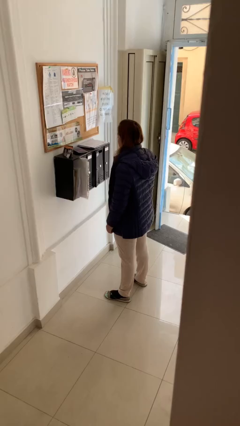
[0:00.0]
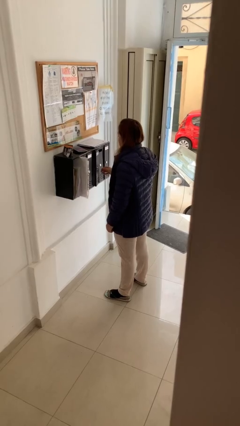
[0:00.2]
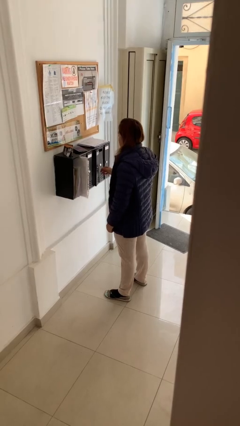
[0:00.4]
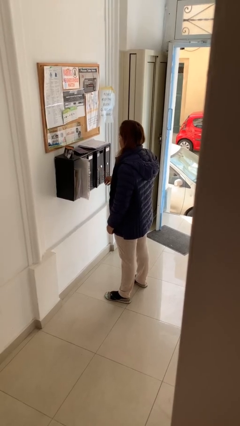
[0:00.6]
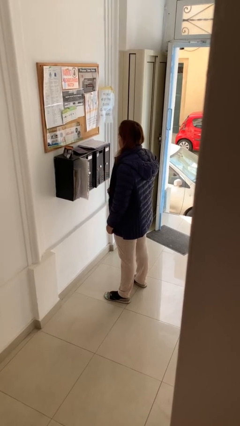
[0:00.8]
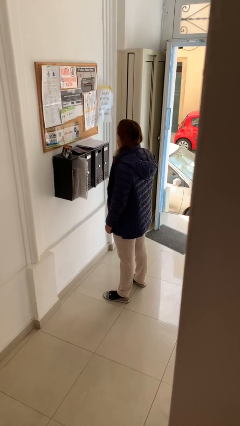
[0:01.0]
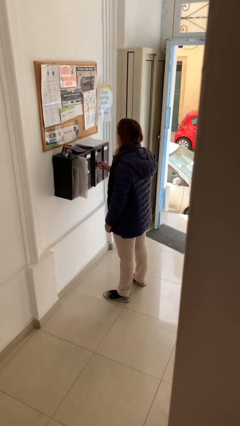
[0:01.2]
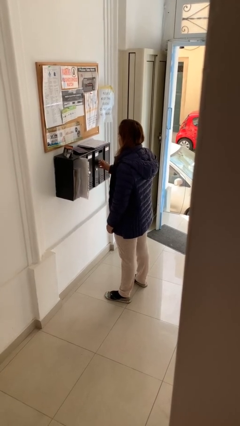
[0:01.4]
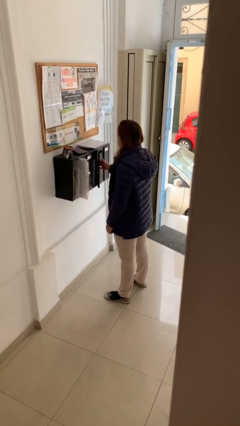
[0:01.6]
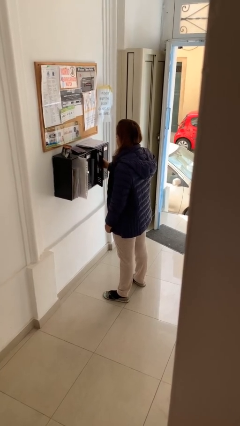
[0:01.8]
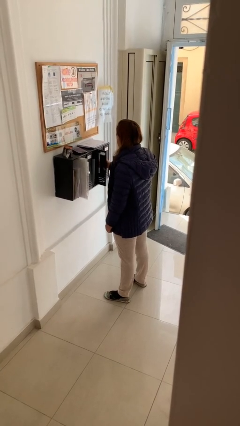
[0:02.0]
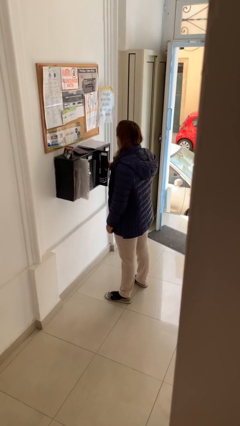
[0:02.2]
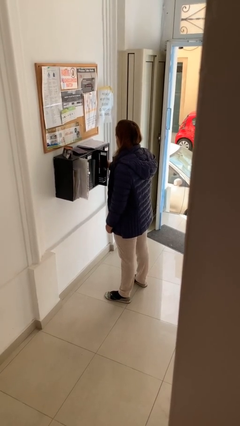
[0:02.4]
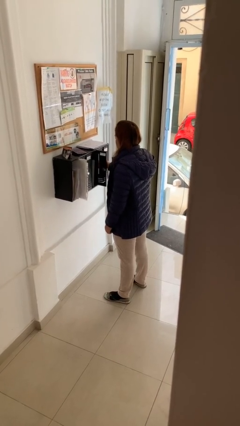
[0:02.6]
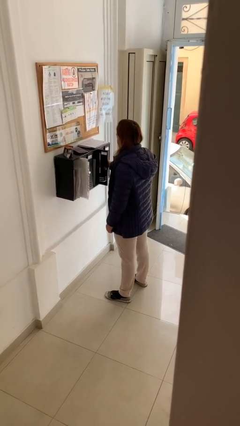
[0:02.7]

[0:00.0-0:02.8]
person opens mailbox

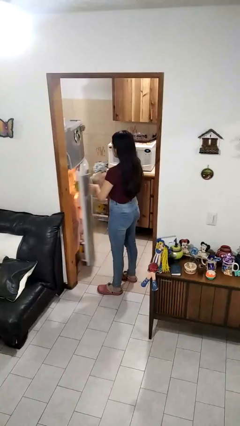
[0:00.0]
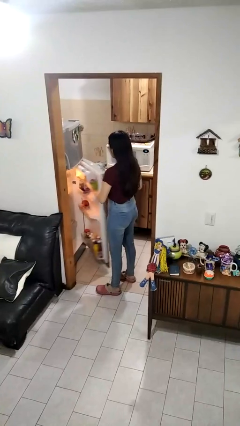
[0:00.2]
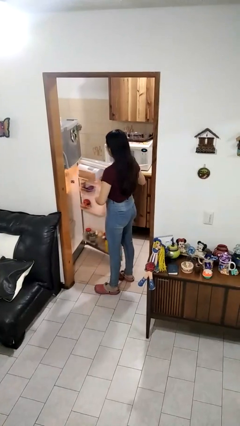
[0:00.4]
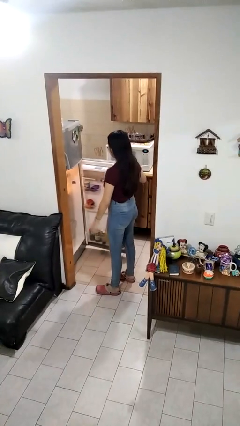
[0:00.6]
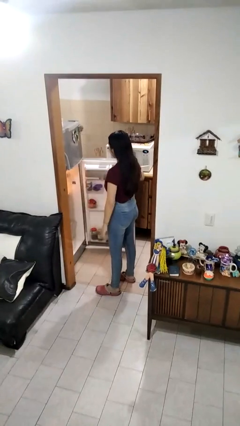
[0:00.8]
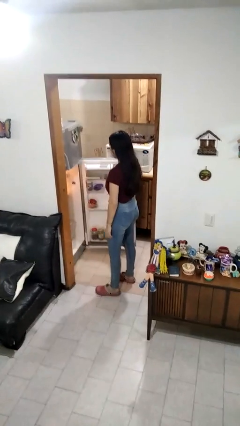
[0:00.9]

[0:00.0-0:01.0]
person opens refrigerator

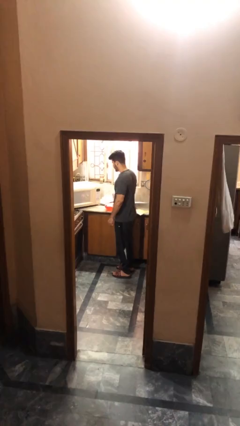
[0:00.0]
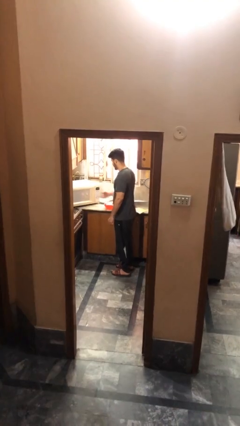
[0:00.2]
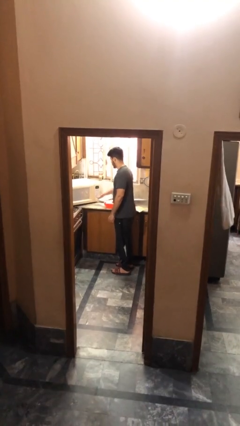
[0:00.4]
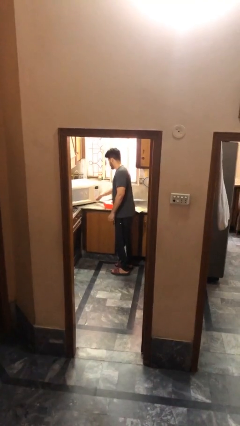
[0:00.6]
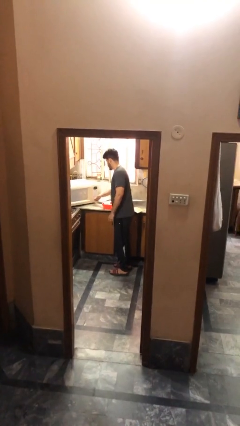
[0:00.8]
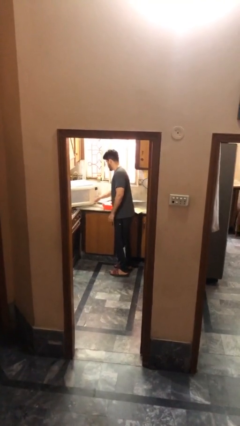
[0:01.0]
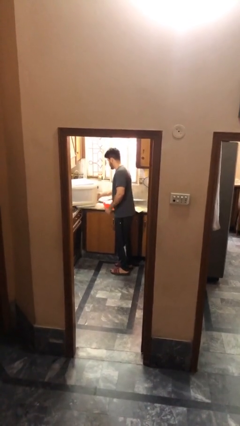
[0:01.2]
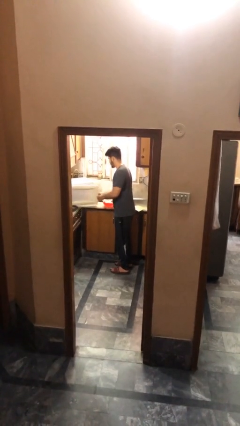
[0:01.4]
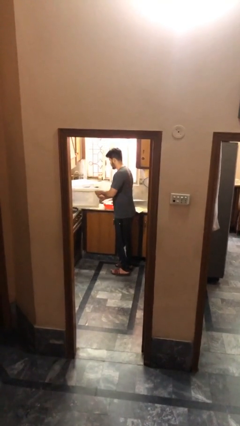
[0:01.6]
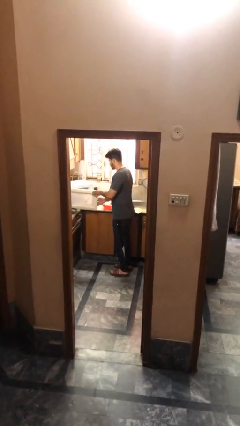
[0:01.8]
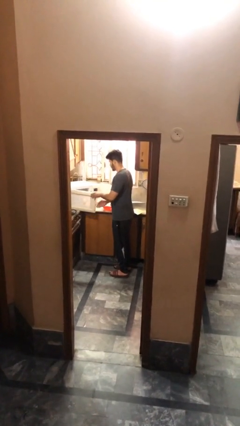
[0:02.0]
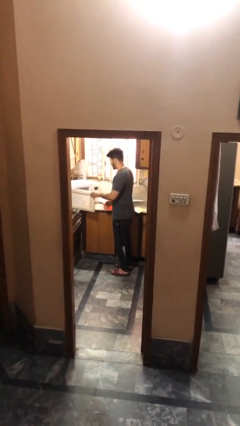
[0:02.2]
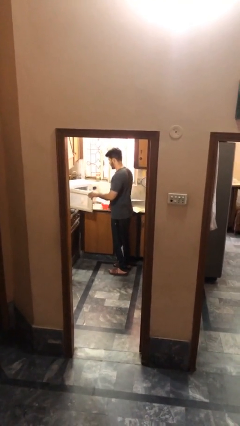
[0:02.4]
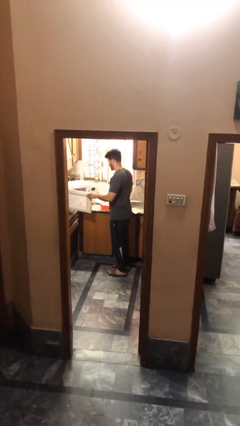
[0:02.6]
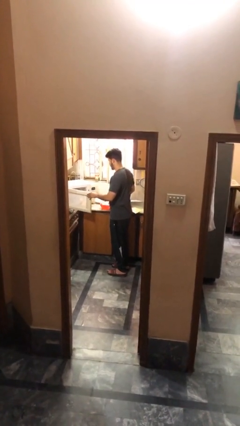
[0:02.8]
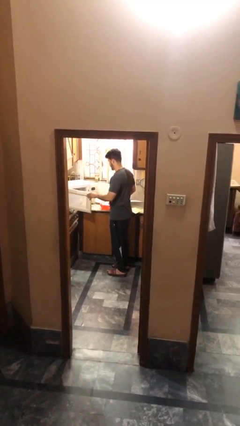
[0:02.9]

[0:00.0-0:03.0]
person opens microwave

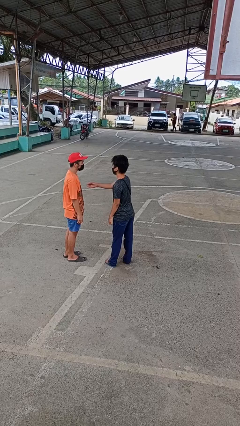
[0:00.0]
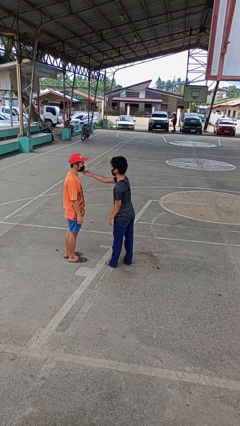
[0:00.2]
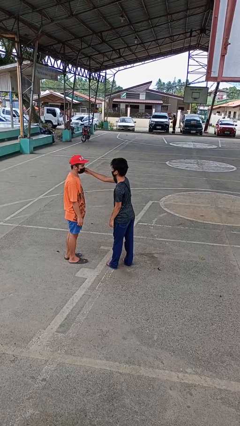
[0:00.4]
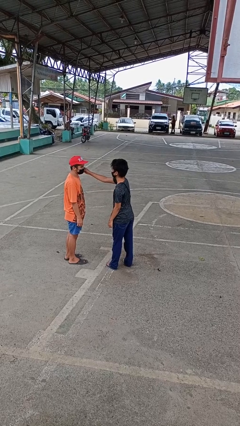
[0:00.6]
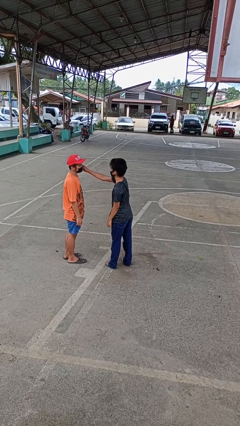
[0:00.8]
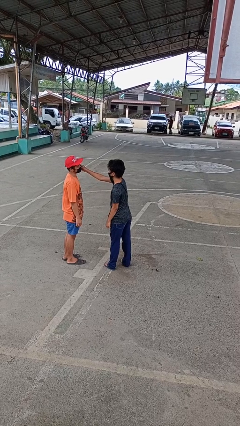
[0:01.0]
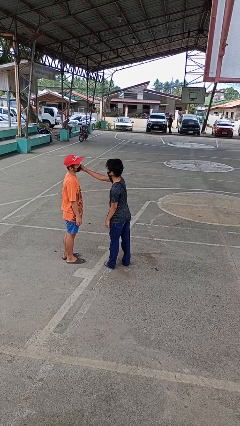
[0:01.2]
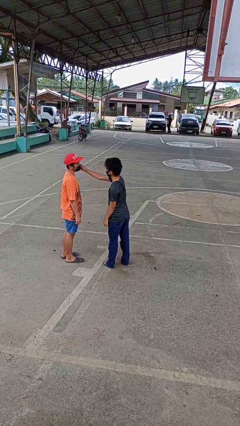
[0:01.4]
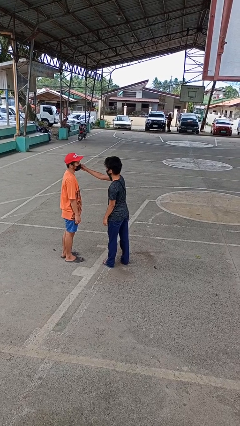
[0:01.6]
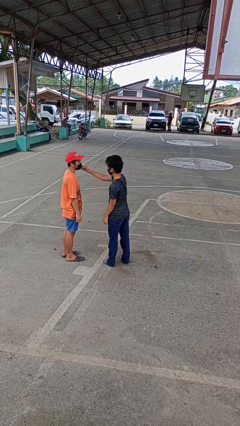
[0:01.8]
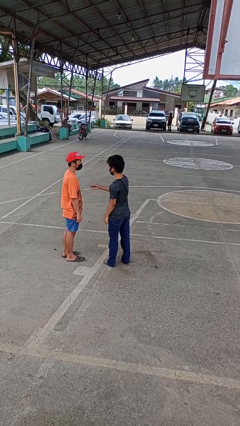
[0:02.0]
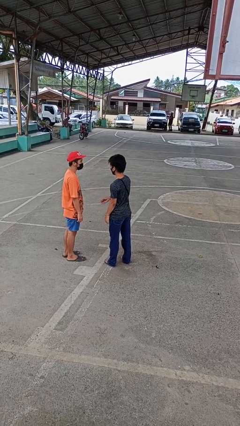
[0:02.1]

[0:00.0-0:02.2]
person touches face of person

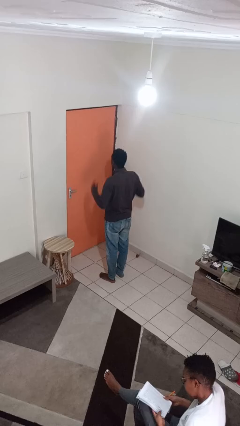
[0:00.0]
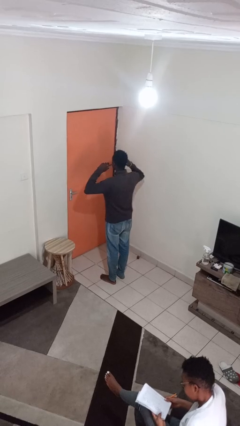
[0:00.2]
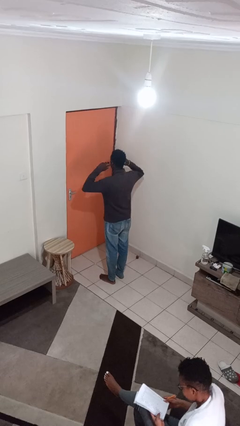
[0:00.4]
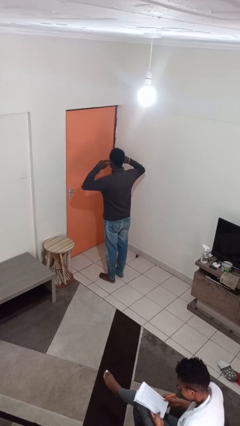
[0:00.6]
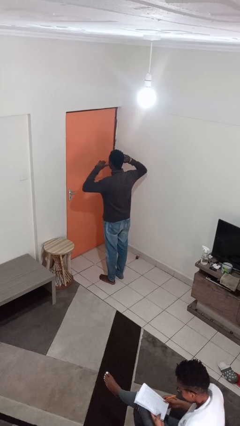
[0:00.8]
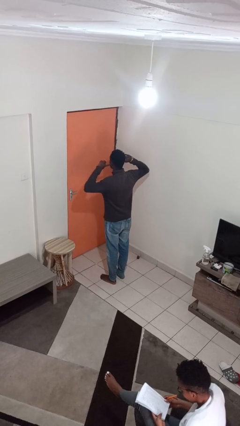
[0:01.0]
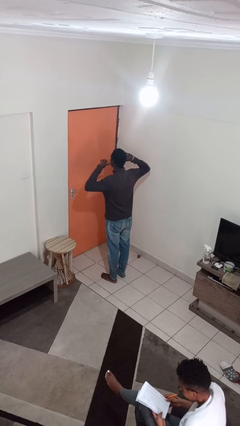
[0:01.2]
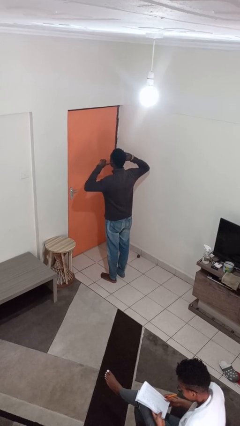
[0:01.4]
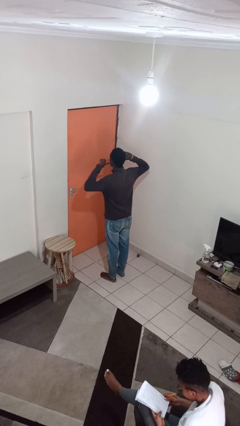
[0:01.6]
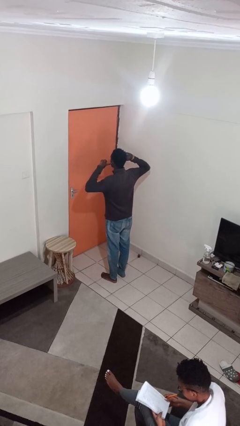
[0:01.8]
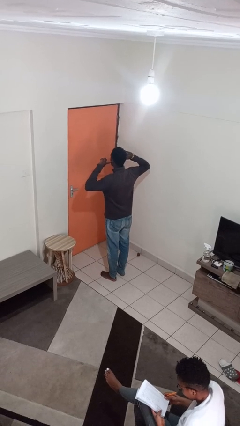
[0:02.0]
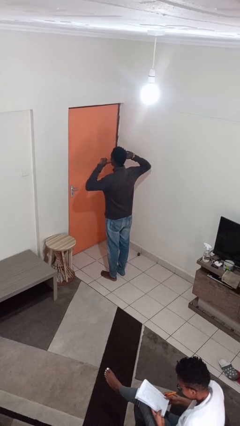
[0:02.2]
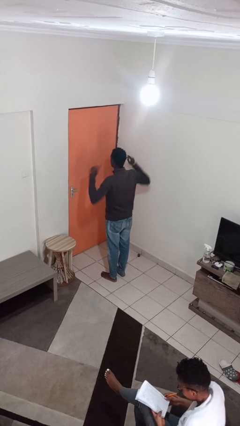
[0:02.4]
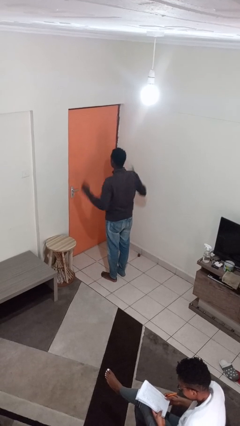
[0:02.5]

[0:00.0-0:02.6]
person puts fingers in ear

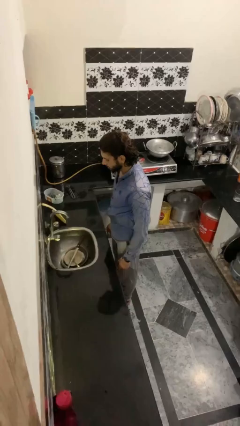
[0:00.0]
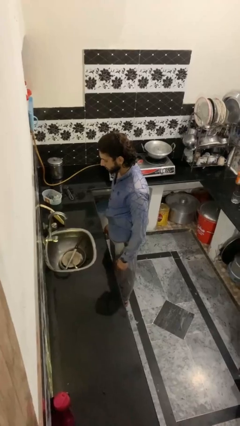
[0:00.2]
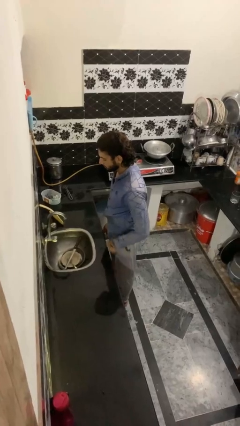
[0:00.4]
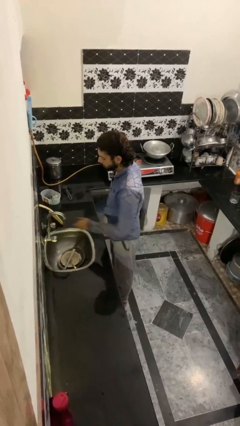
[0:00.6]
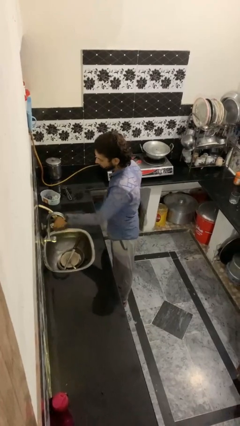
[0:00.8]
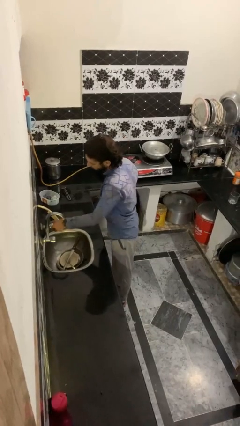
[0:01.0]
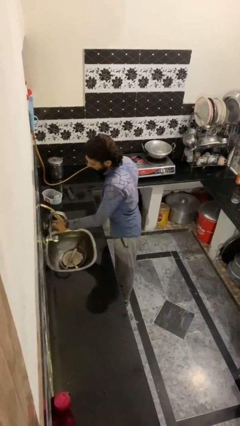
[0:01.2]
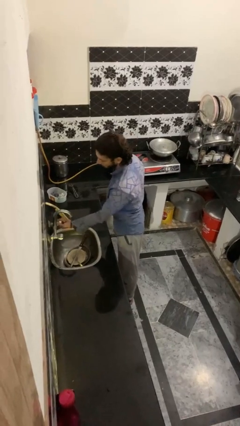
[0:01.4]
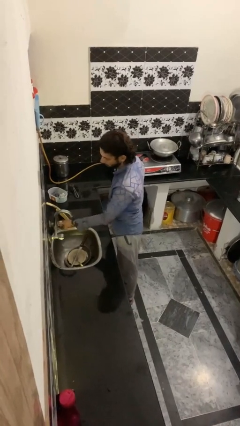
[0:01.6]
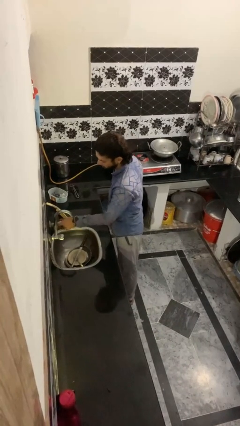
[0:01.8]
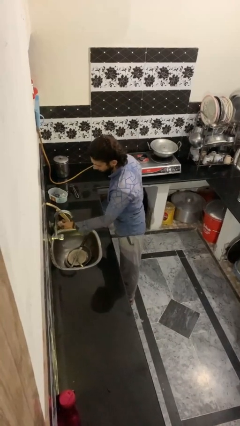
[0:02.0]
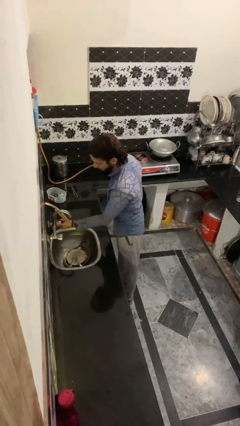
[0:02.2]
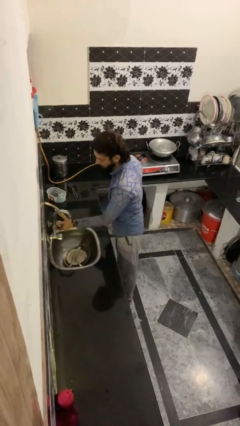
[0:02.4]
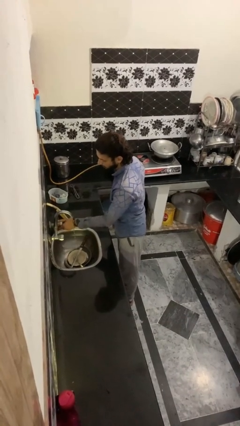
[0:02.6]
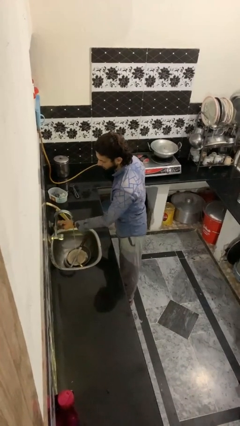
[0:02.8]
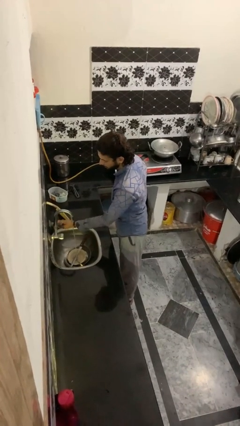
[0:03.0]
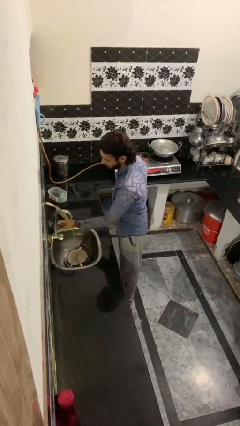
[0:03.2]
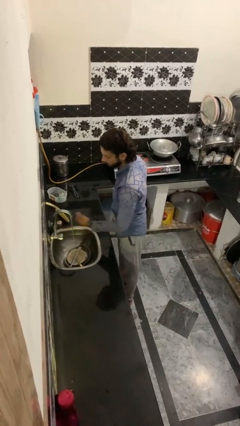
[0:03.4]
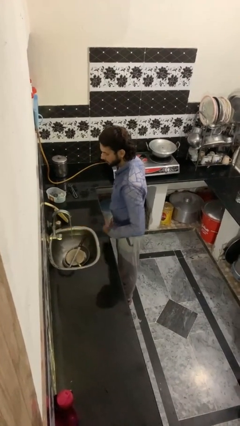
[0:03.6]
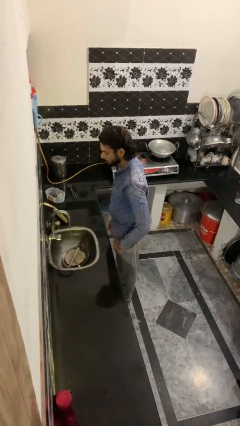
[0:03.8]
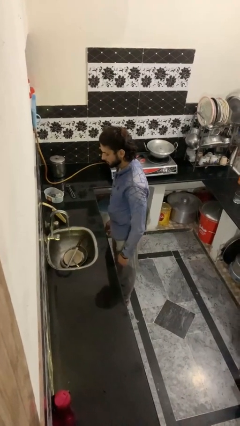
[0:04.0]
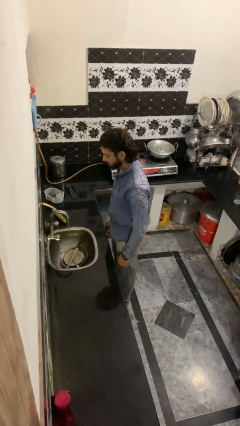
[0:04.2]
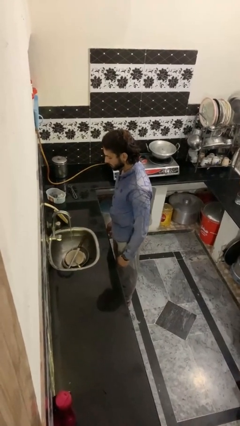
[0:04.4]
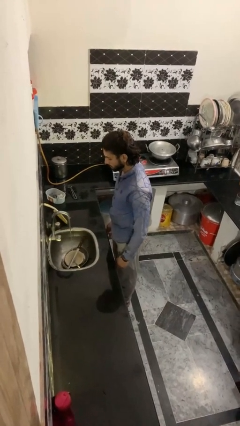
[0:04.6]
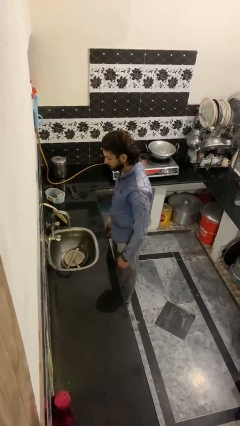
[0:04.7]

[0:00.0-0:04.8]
person turns on faucet

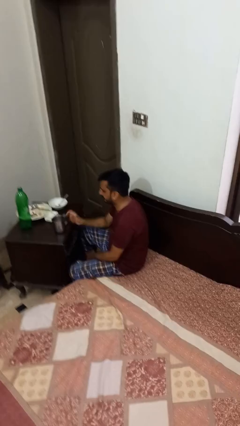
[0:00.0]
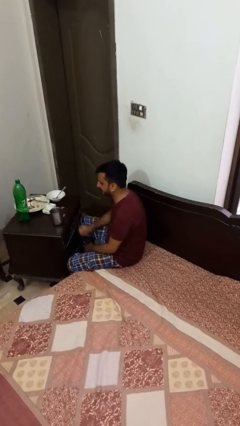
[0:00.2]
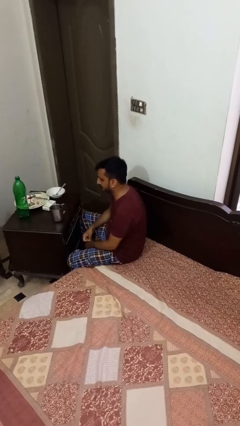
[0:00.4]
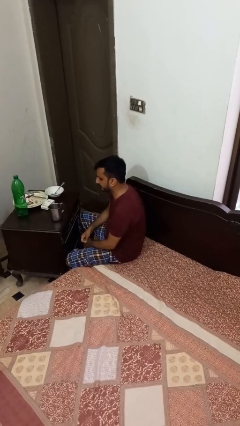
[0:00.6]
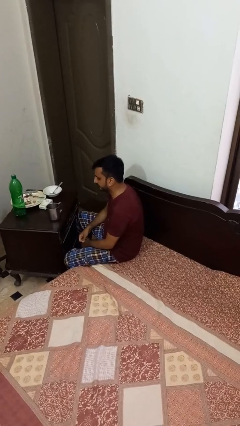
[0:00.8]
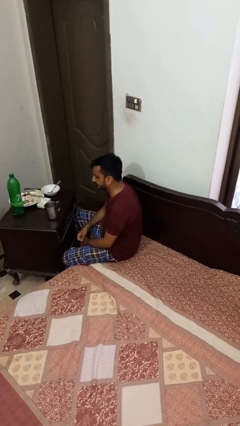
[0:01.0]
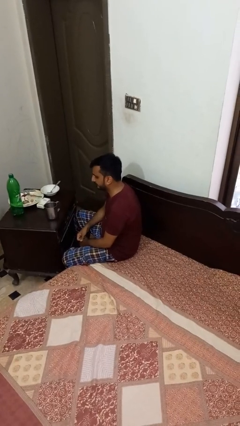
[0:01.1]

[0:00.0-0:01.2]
person puts down object on table
